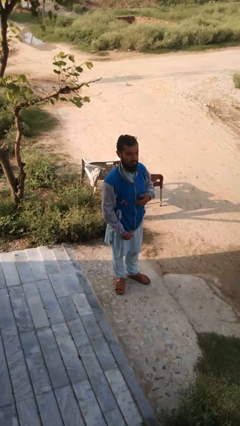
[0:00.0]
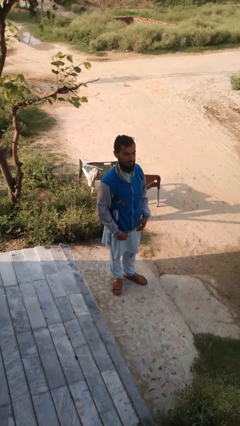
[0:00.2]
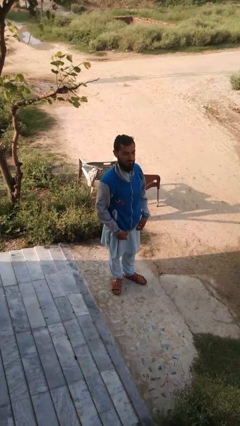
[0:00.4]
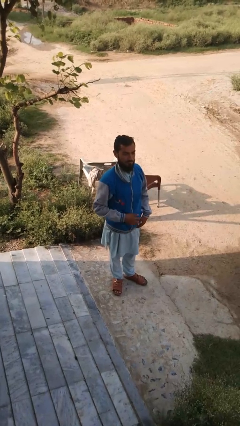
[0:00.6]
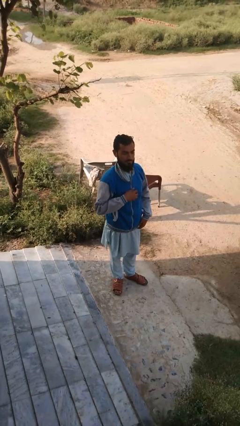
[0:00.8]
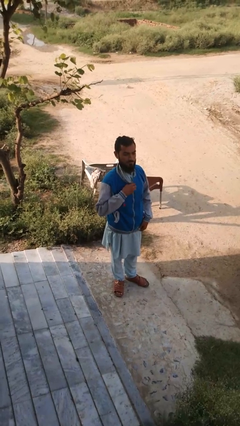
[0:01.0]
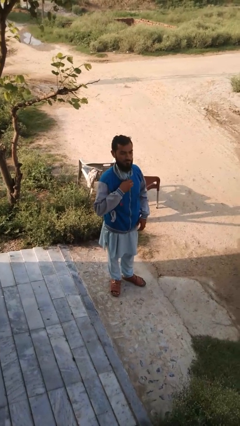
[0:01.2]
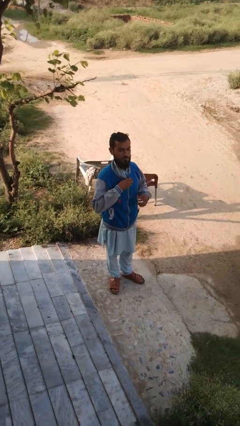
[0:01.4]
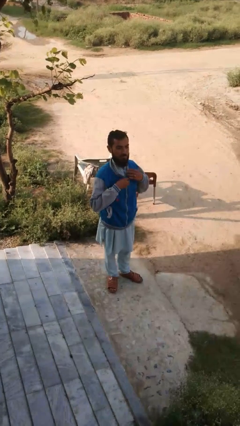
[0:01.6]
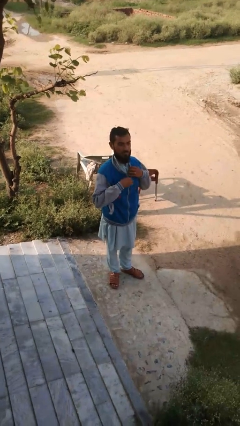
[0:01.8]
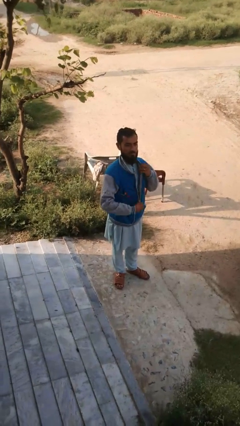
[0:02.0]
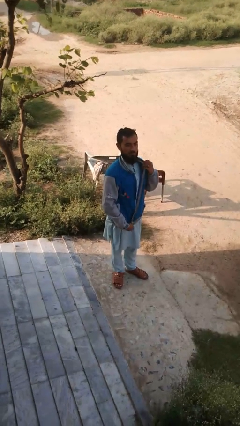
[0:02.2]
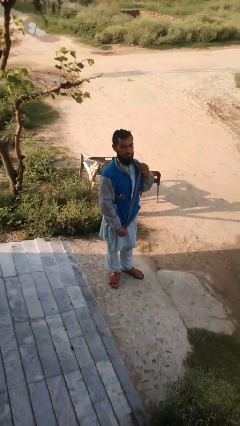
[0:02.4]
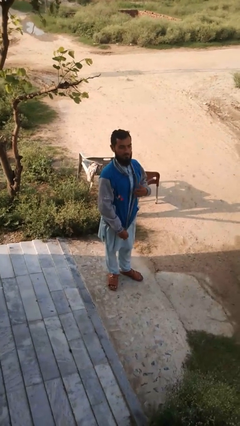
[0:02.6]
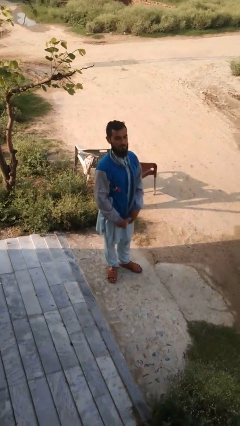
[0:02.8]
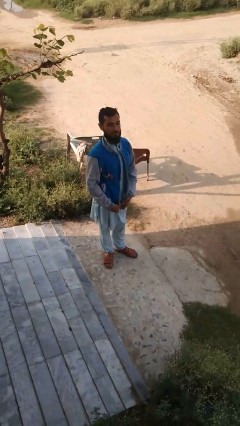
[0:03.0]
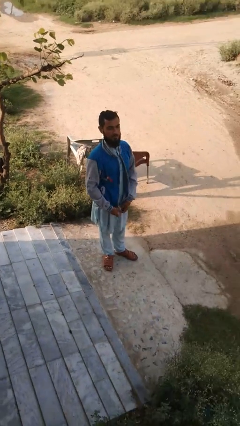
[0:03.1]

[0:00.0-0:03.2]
person unzips jacket

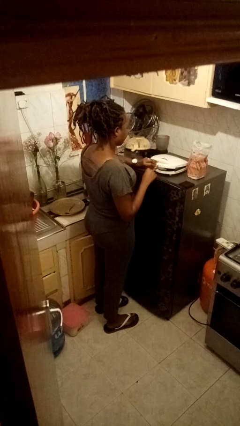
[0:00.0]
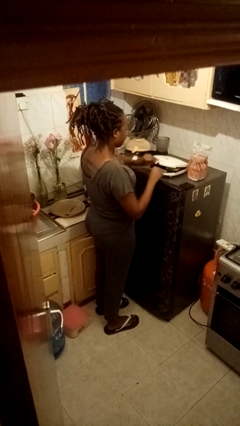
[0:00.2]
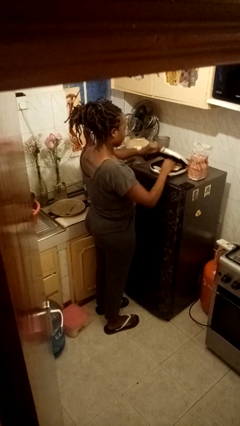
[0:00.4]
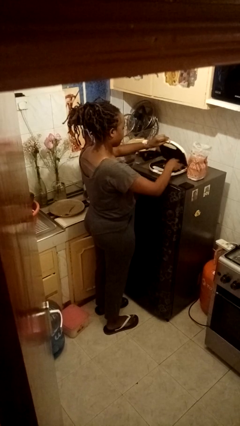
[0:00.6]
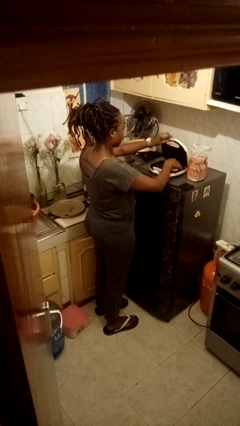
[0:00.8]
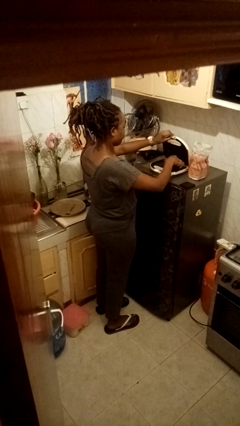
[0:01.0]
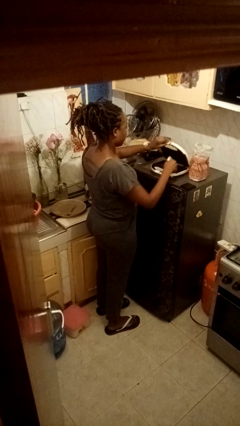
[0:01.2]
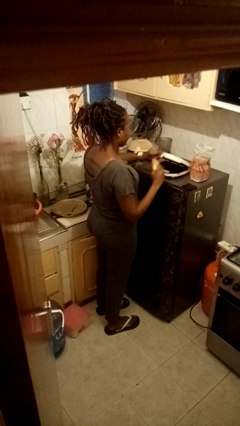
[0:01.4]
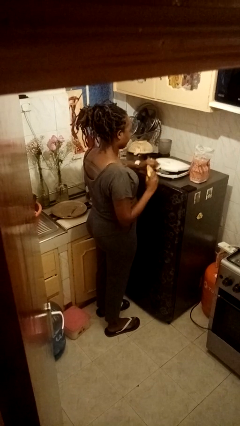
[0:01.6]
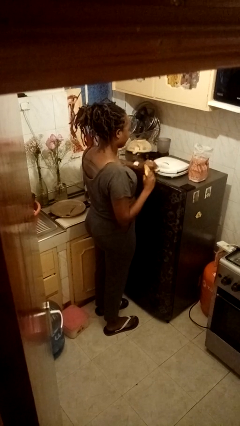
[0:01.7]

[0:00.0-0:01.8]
person takes object from toaster

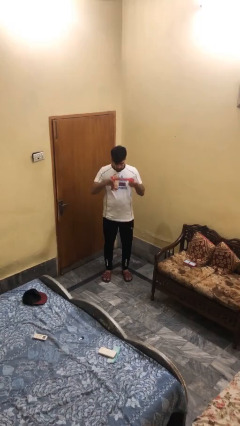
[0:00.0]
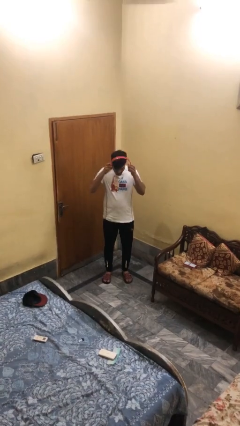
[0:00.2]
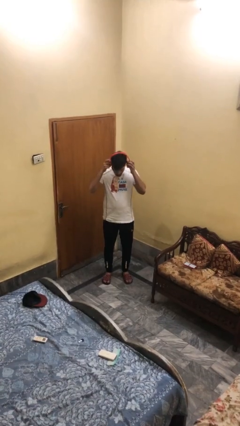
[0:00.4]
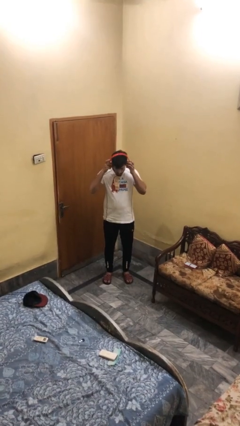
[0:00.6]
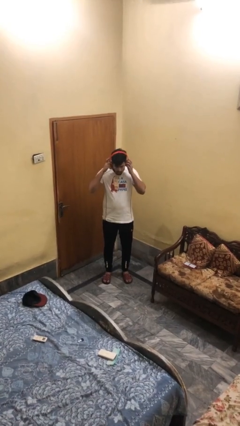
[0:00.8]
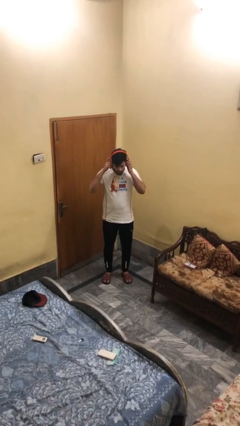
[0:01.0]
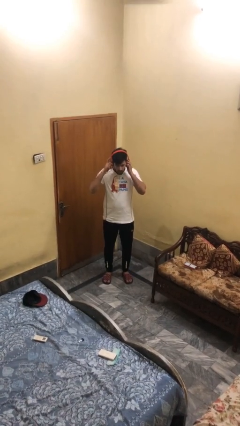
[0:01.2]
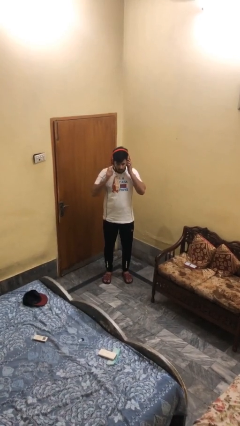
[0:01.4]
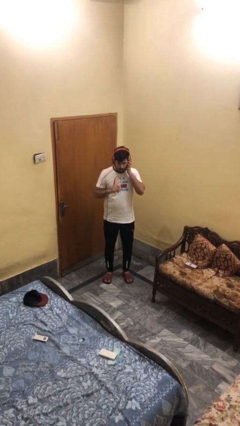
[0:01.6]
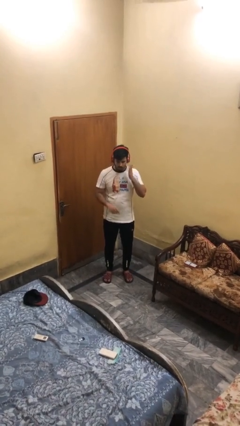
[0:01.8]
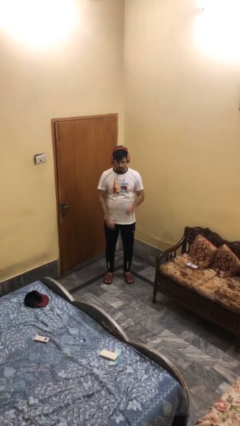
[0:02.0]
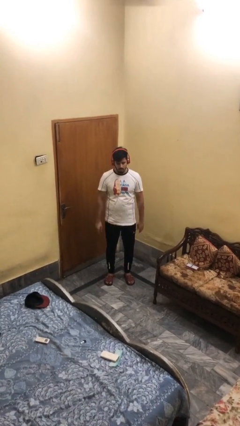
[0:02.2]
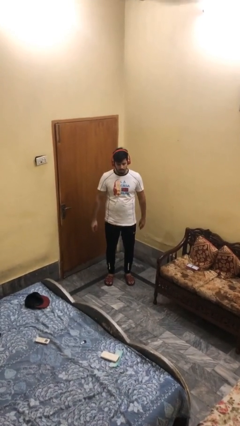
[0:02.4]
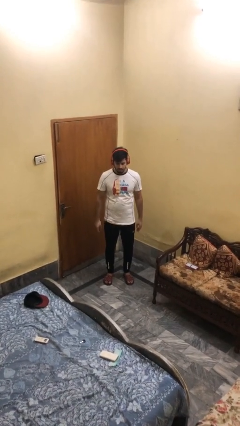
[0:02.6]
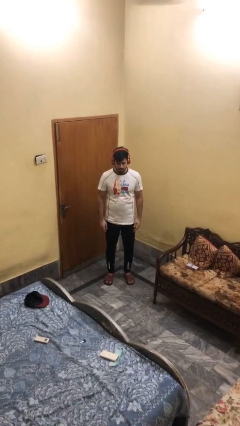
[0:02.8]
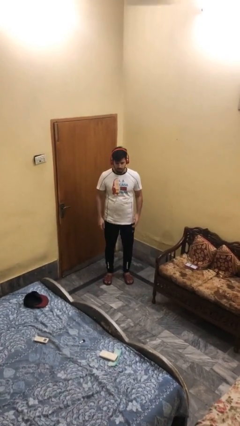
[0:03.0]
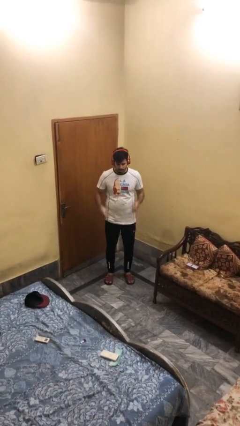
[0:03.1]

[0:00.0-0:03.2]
person puts on headphones

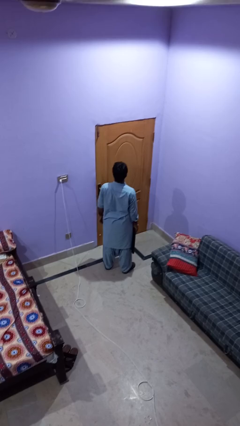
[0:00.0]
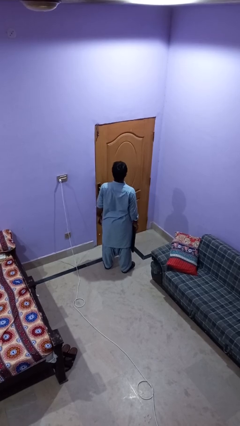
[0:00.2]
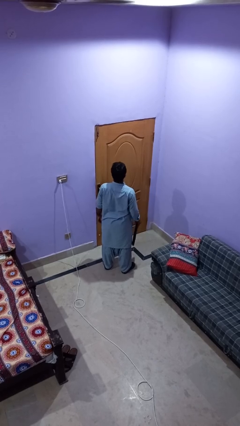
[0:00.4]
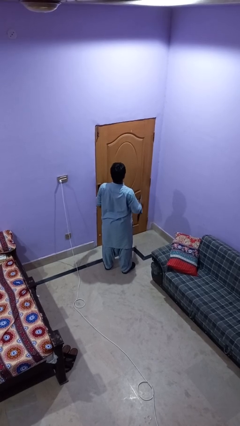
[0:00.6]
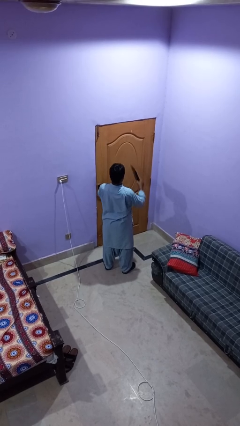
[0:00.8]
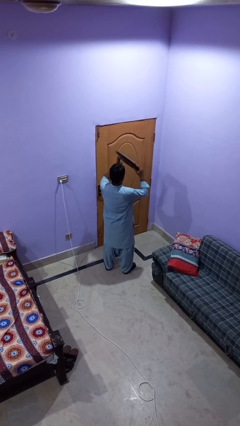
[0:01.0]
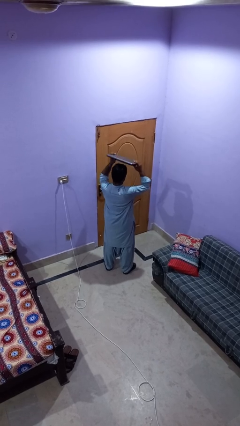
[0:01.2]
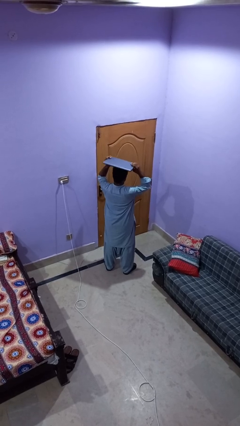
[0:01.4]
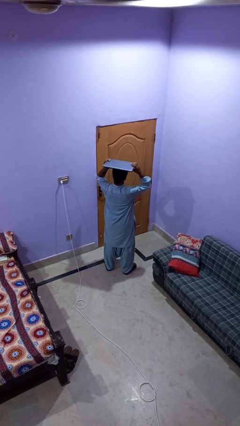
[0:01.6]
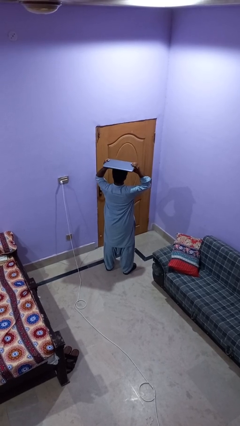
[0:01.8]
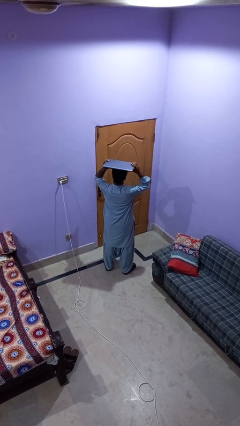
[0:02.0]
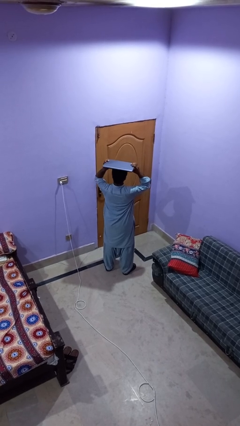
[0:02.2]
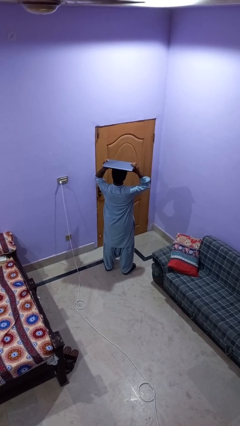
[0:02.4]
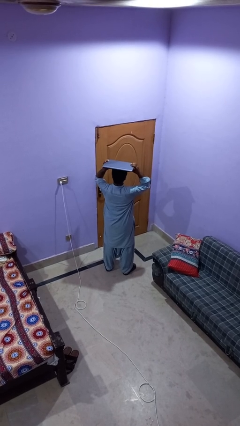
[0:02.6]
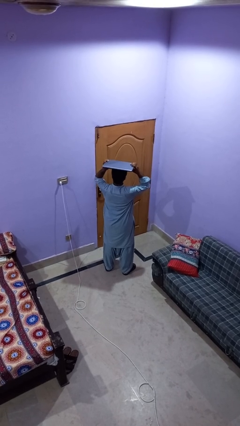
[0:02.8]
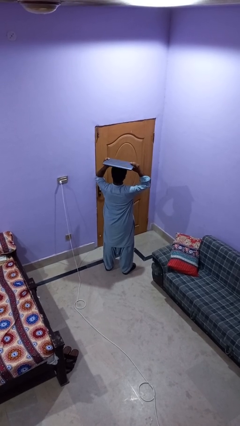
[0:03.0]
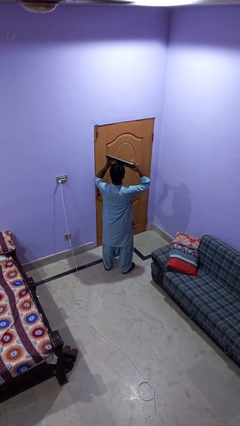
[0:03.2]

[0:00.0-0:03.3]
person holds object above head

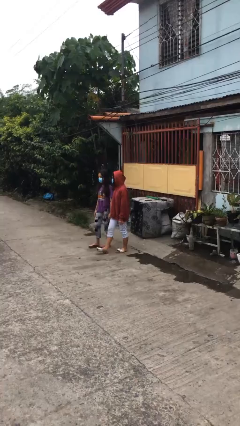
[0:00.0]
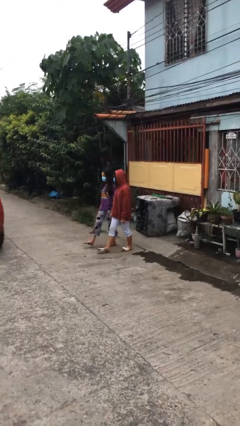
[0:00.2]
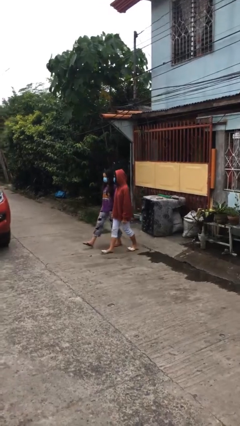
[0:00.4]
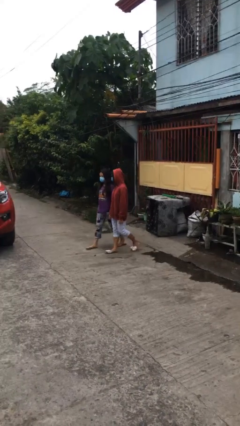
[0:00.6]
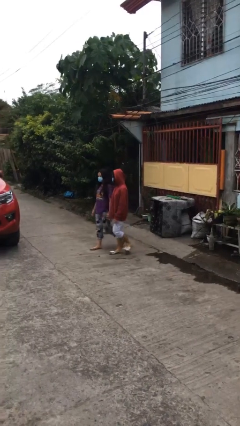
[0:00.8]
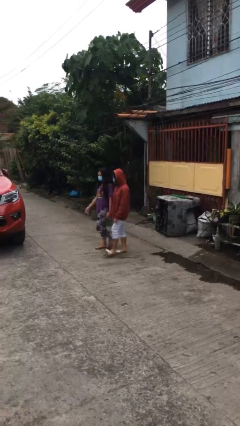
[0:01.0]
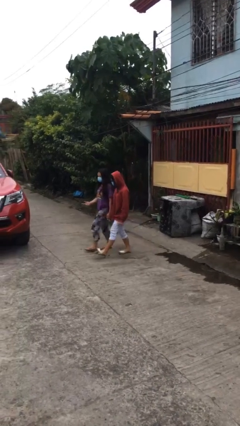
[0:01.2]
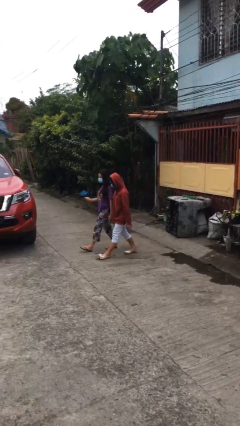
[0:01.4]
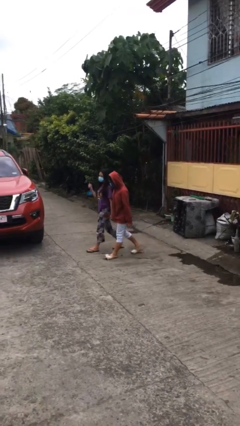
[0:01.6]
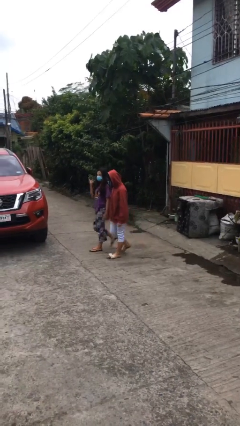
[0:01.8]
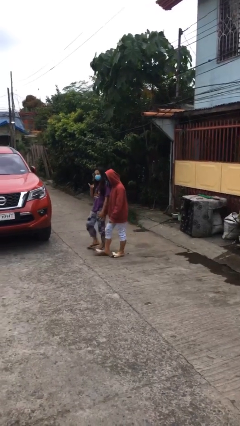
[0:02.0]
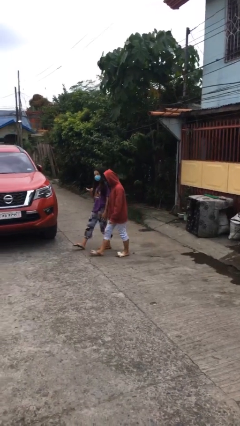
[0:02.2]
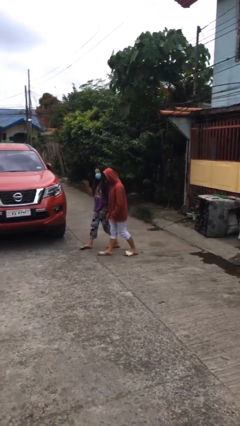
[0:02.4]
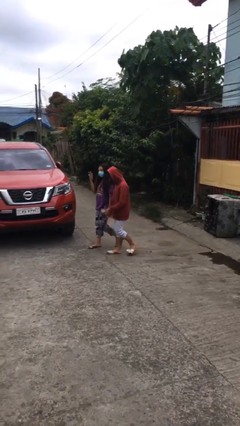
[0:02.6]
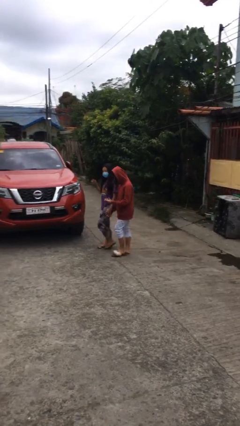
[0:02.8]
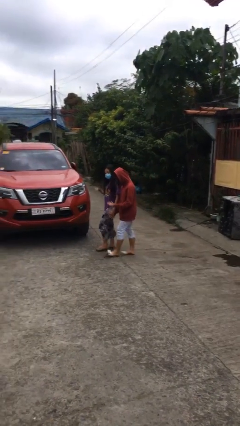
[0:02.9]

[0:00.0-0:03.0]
person holds hand

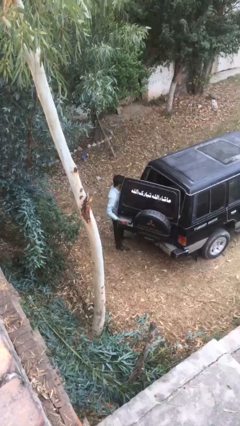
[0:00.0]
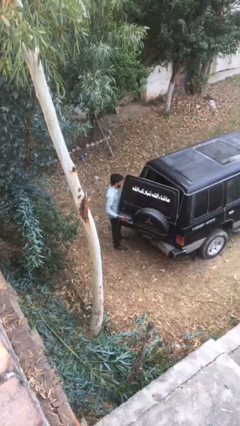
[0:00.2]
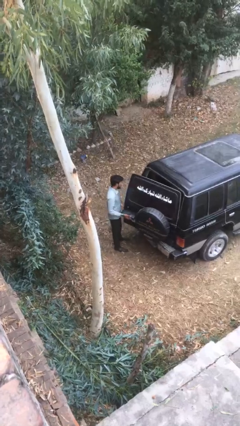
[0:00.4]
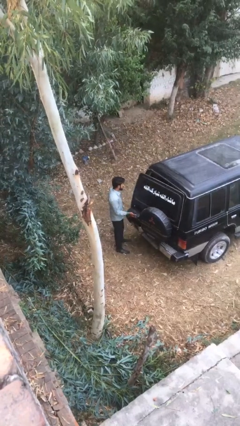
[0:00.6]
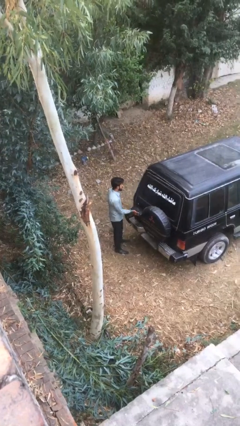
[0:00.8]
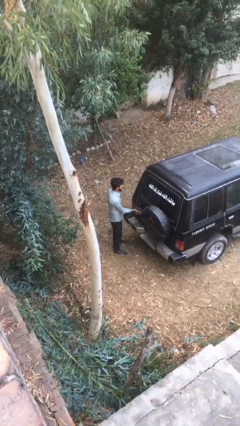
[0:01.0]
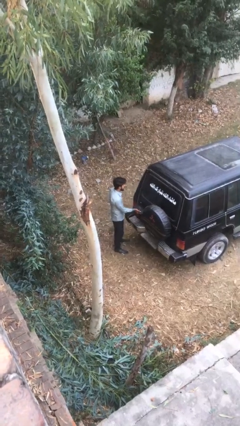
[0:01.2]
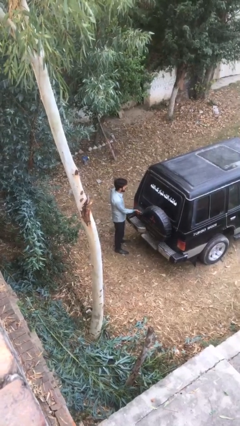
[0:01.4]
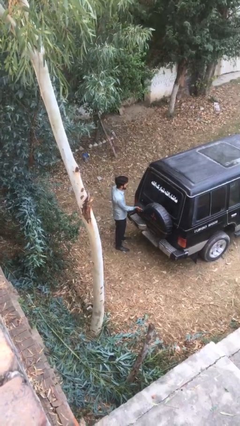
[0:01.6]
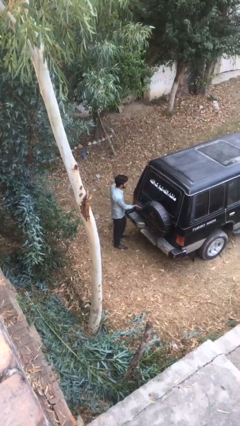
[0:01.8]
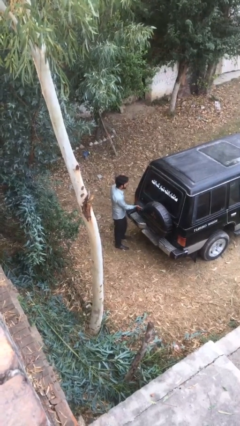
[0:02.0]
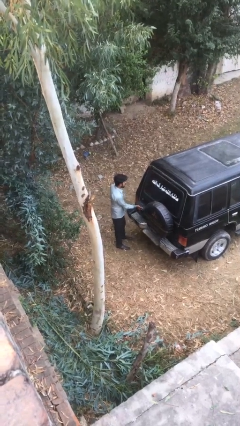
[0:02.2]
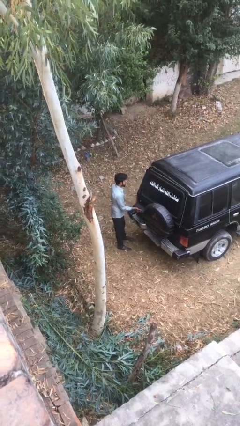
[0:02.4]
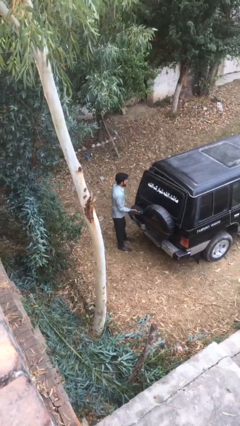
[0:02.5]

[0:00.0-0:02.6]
person closes car trunk

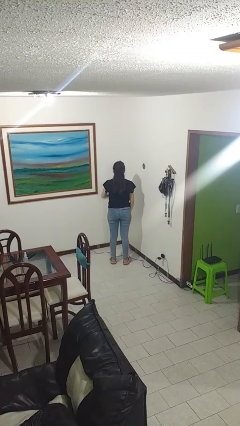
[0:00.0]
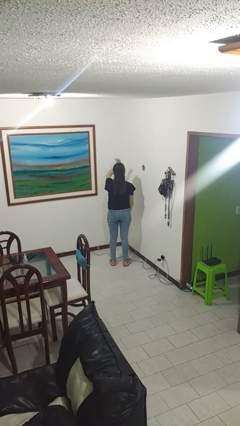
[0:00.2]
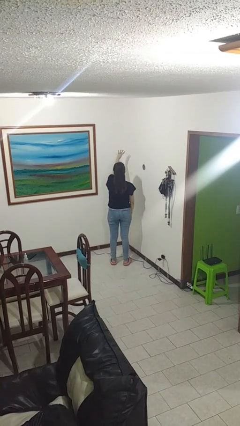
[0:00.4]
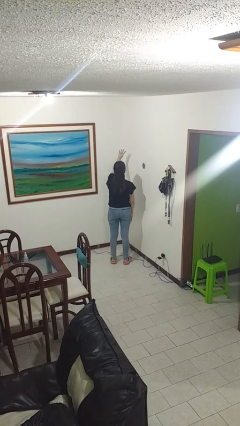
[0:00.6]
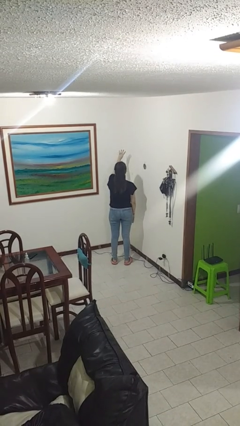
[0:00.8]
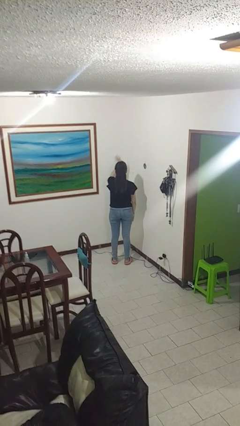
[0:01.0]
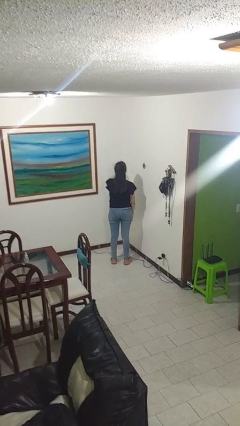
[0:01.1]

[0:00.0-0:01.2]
person gestures number four
